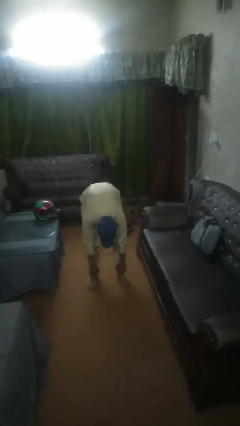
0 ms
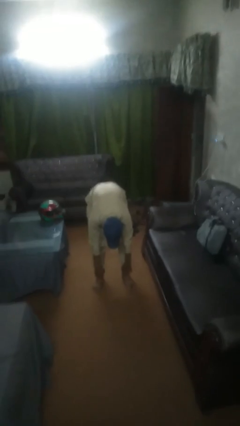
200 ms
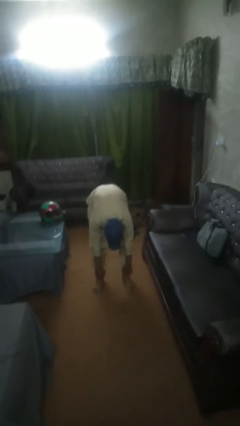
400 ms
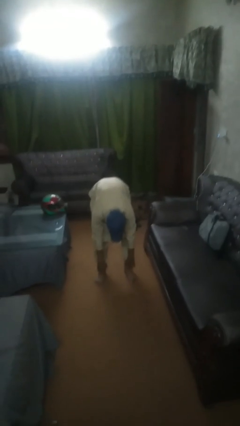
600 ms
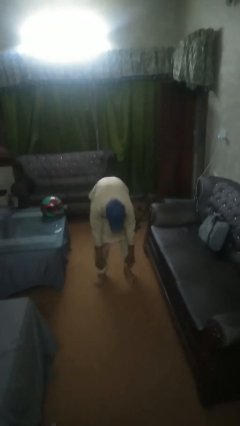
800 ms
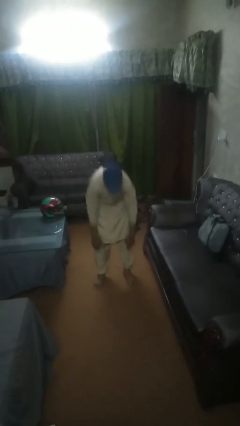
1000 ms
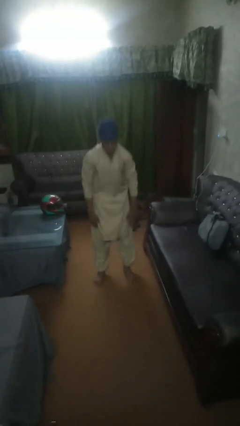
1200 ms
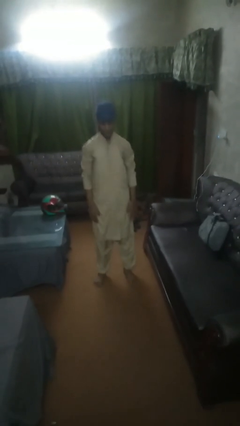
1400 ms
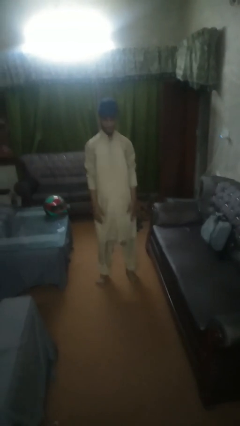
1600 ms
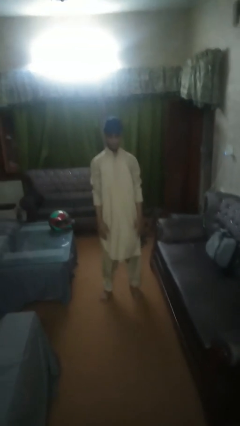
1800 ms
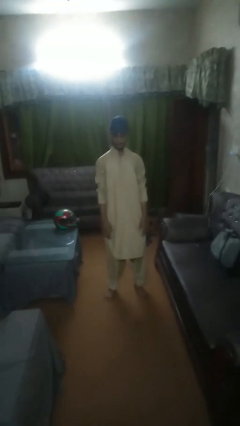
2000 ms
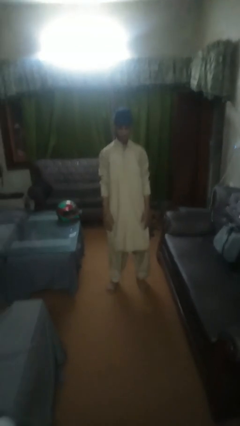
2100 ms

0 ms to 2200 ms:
person stands up from floor

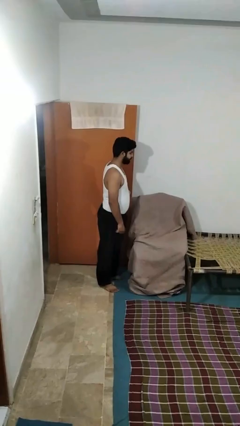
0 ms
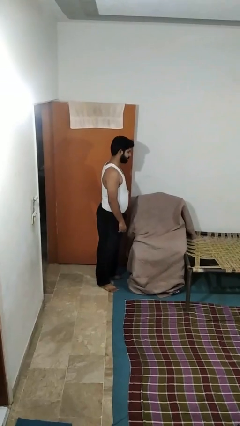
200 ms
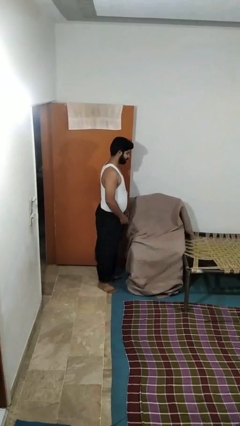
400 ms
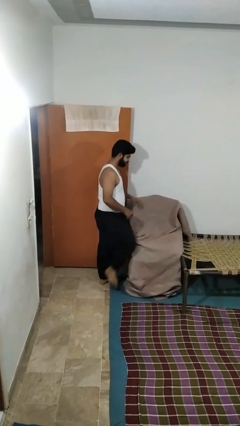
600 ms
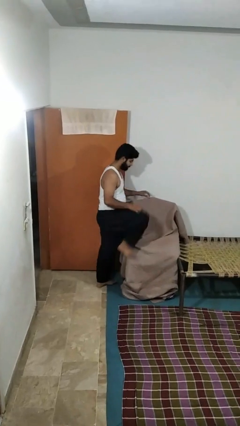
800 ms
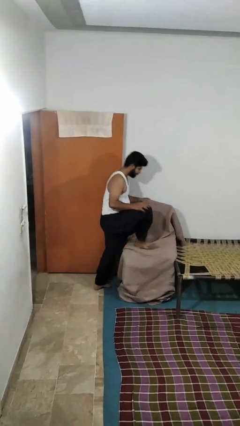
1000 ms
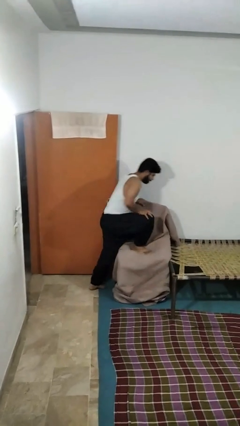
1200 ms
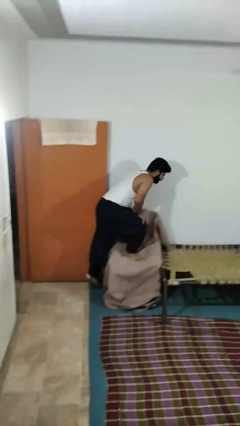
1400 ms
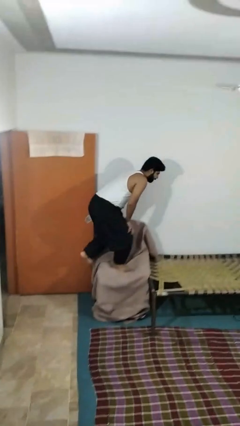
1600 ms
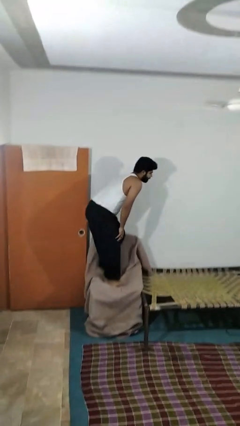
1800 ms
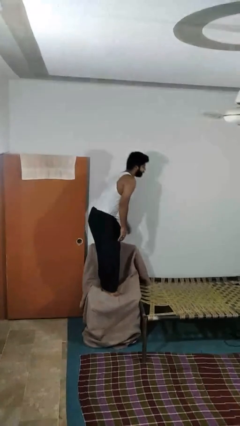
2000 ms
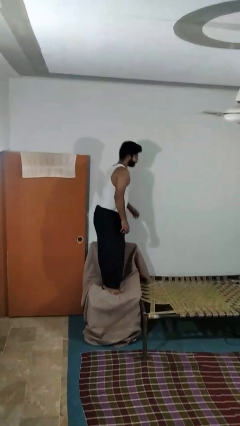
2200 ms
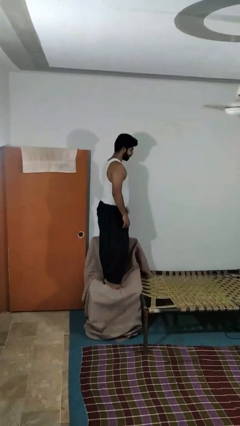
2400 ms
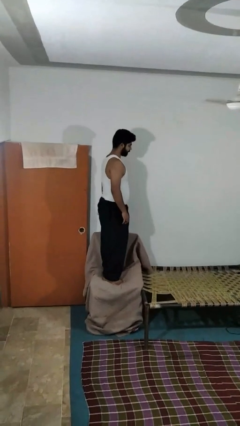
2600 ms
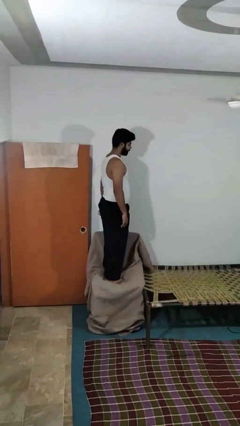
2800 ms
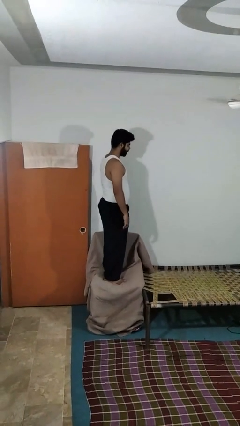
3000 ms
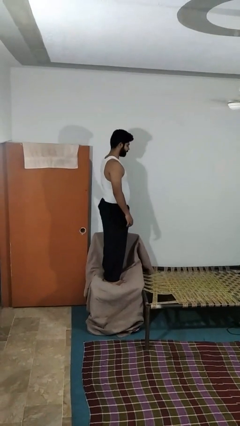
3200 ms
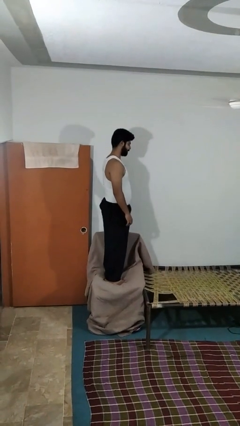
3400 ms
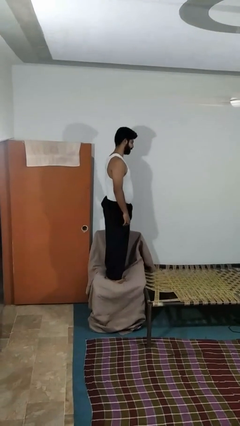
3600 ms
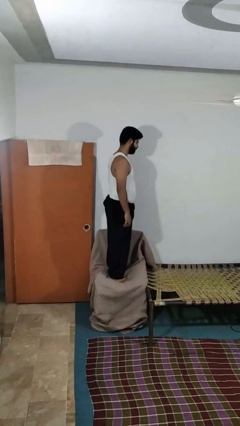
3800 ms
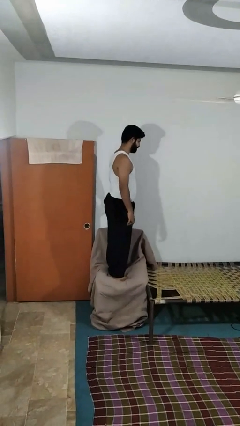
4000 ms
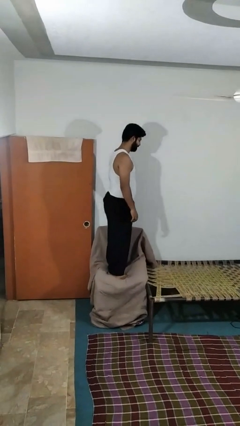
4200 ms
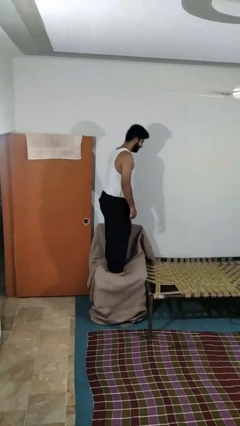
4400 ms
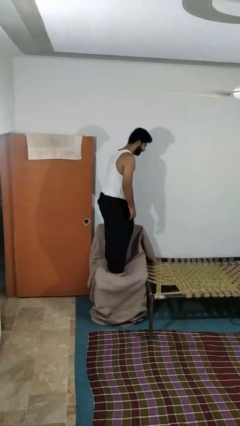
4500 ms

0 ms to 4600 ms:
person climbs on couch

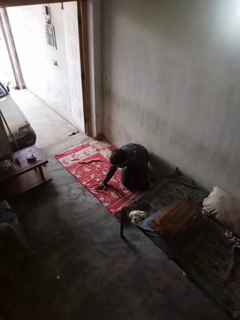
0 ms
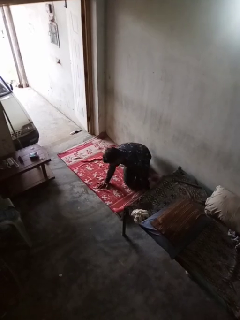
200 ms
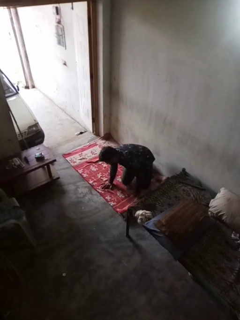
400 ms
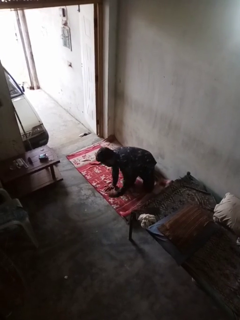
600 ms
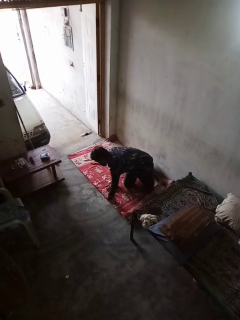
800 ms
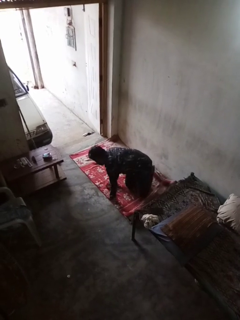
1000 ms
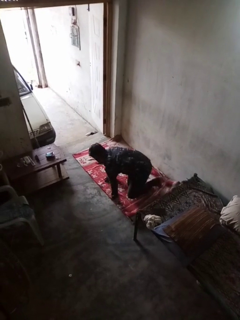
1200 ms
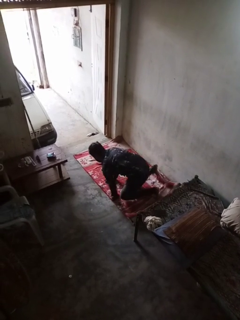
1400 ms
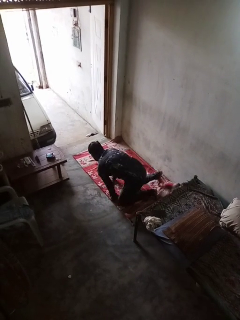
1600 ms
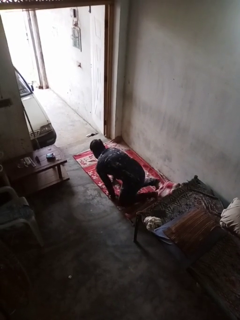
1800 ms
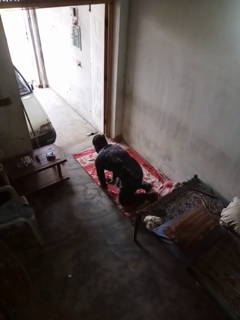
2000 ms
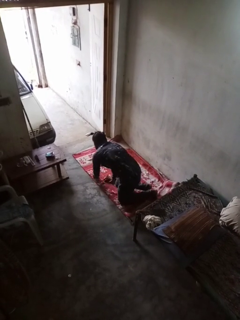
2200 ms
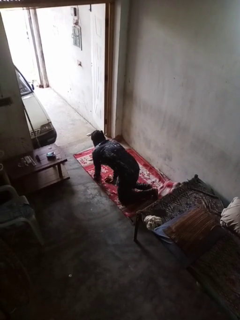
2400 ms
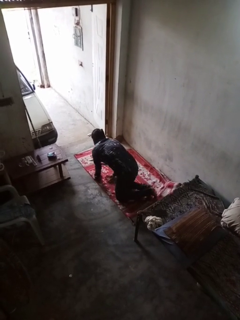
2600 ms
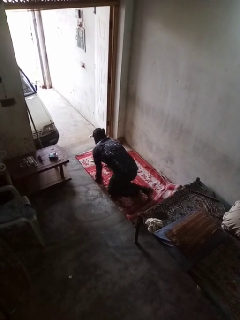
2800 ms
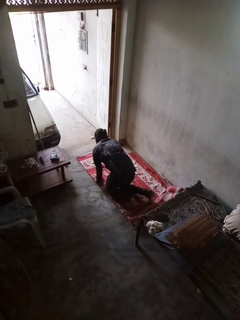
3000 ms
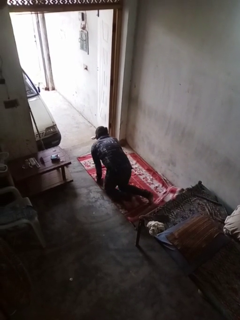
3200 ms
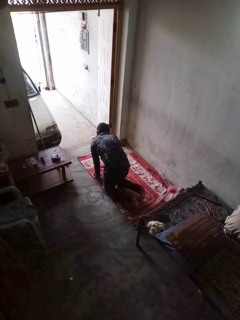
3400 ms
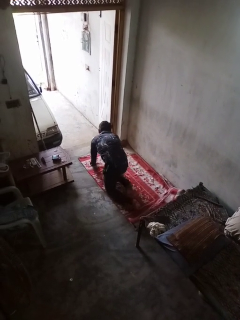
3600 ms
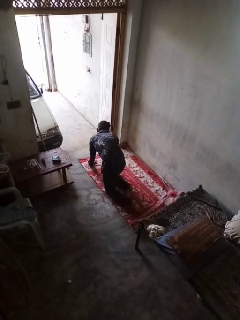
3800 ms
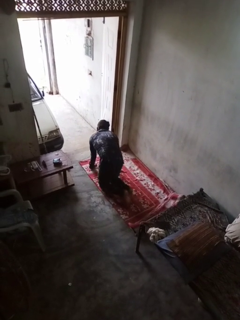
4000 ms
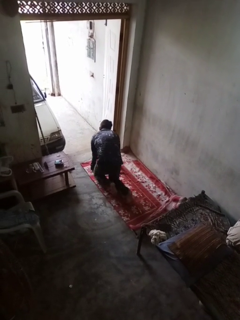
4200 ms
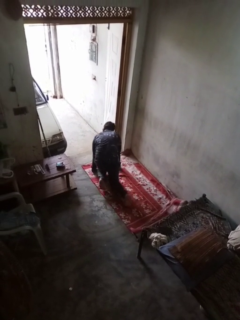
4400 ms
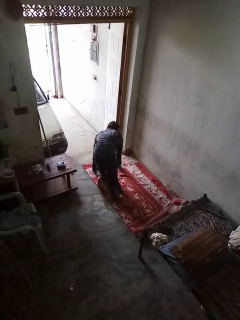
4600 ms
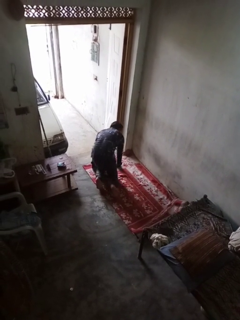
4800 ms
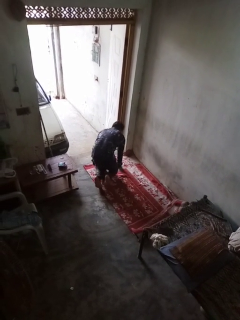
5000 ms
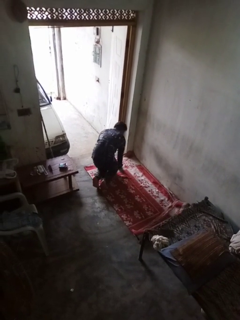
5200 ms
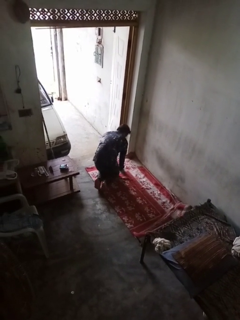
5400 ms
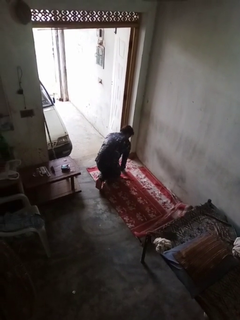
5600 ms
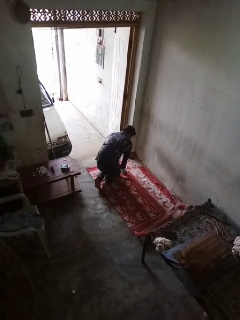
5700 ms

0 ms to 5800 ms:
person crawls

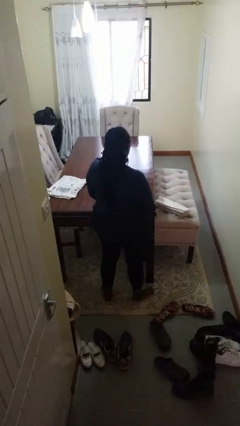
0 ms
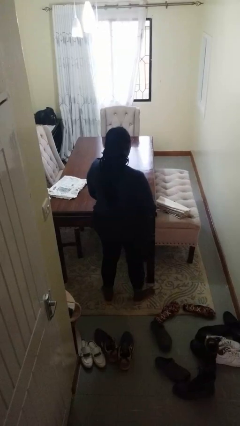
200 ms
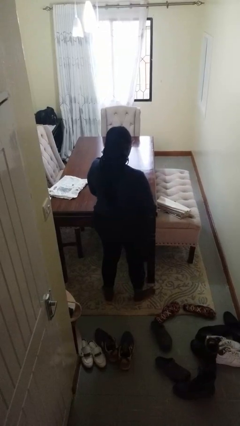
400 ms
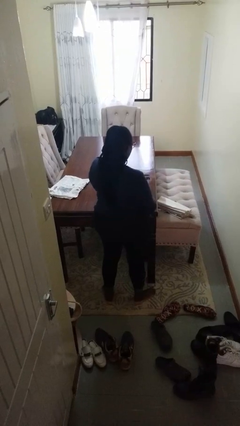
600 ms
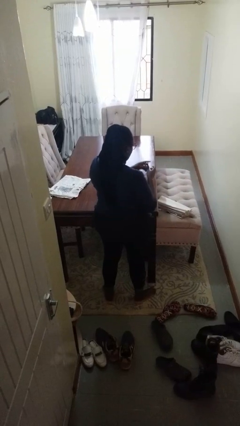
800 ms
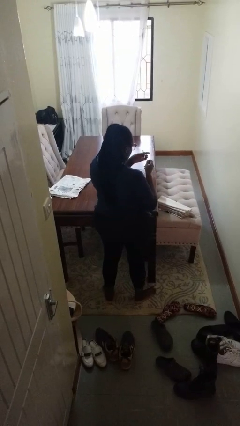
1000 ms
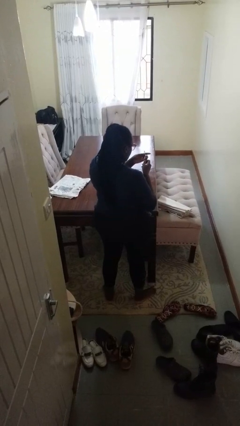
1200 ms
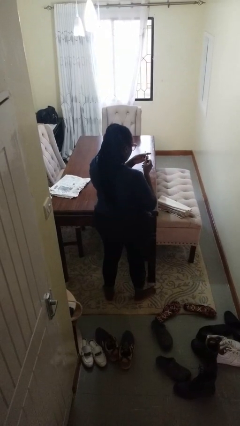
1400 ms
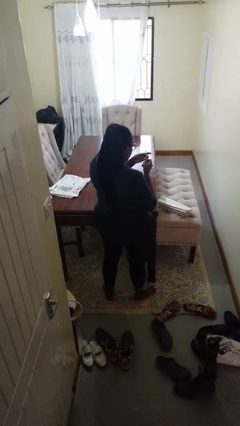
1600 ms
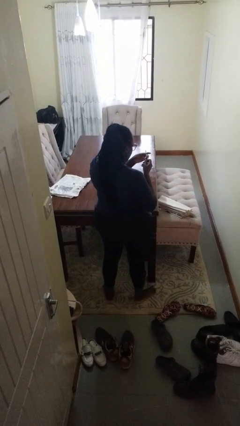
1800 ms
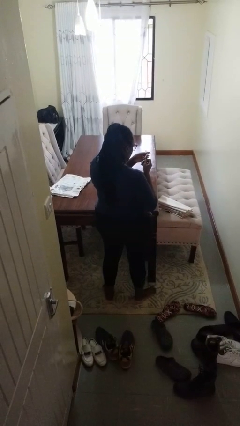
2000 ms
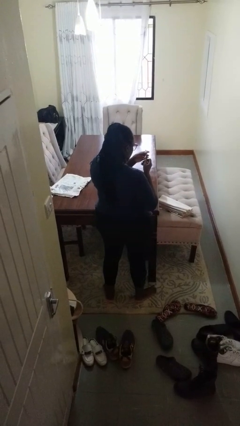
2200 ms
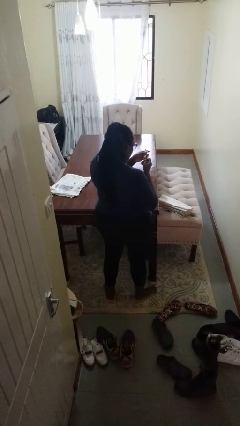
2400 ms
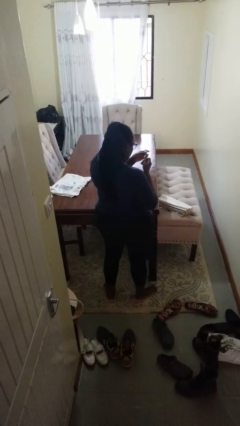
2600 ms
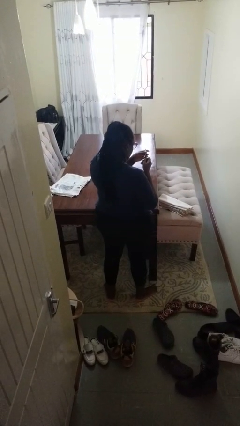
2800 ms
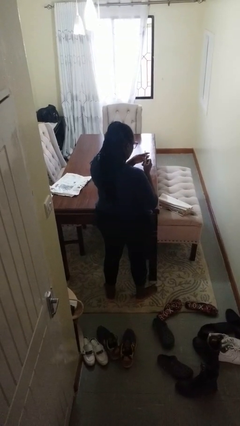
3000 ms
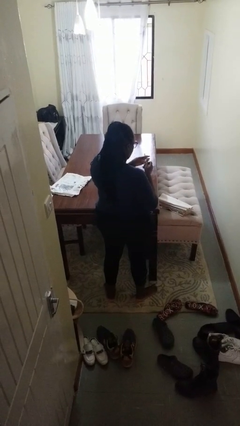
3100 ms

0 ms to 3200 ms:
person clips fingernails

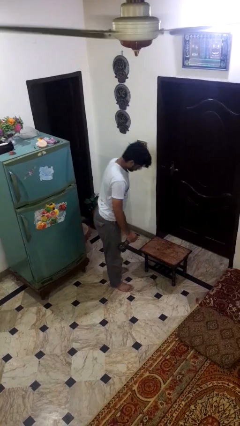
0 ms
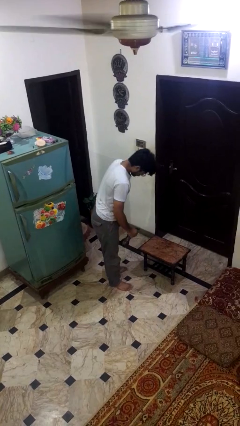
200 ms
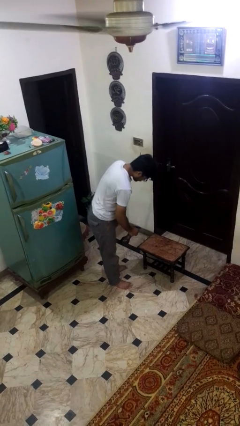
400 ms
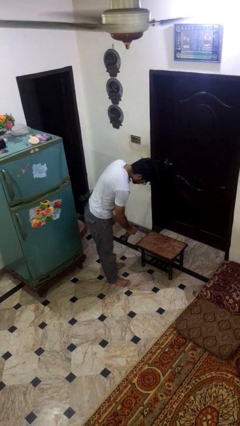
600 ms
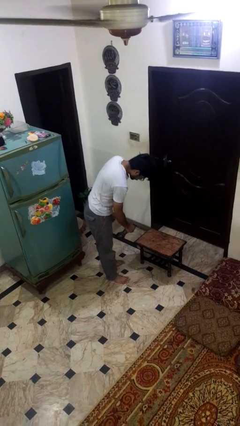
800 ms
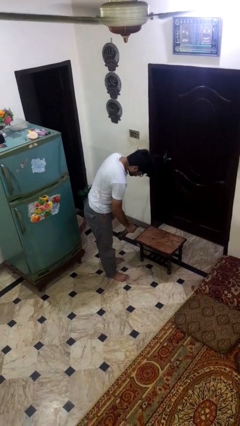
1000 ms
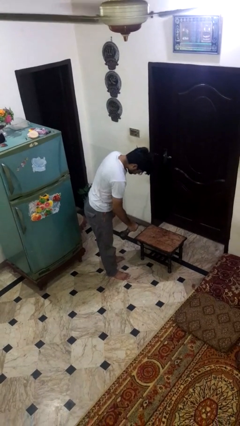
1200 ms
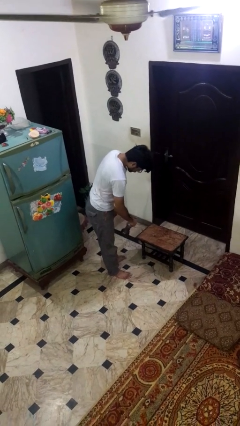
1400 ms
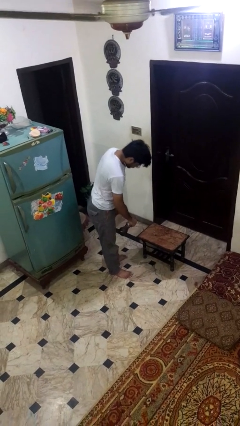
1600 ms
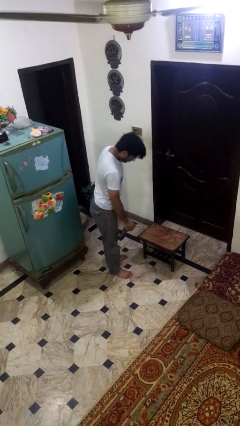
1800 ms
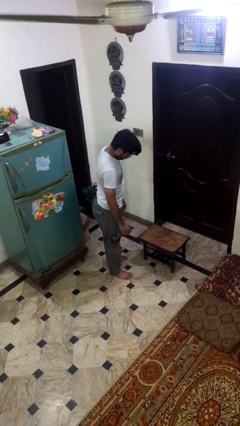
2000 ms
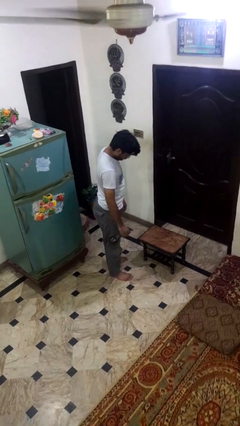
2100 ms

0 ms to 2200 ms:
person sprays from bottle

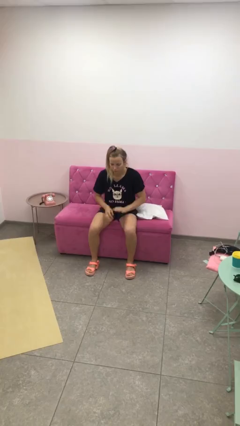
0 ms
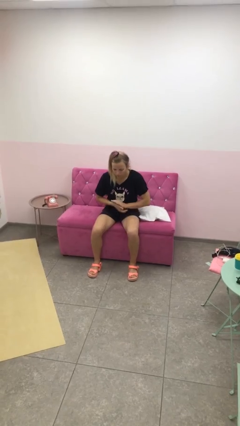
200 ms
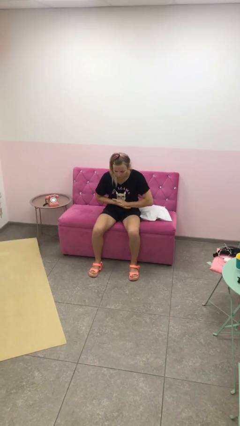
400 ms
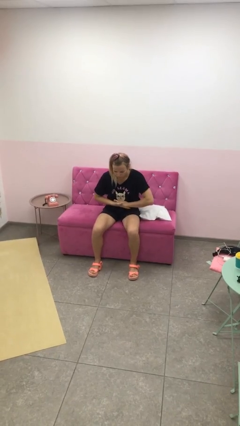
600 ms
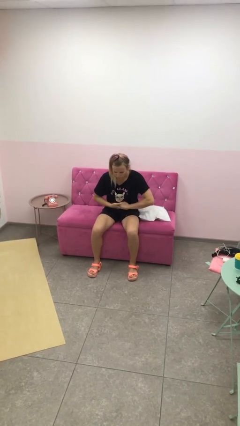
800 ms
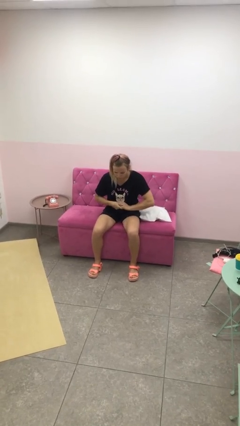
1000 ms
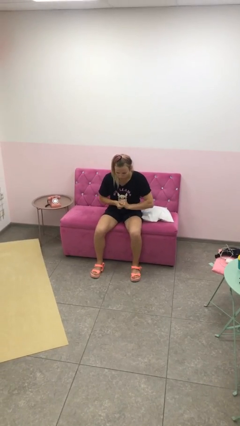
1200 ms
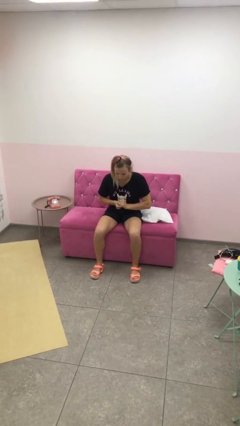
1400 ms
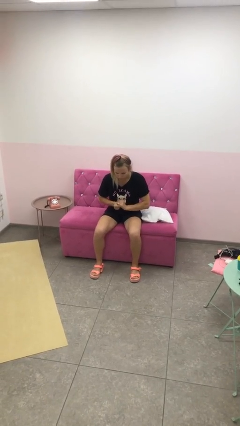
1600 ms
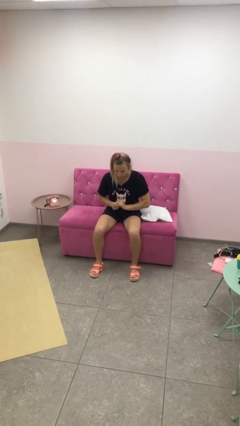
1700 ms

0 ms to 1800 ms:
person looks at hands in lap
